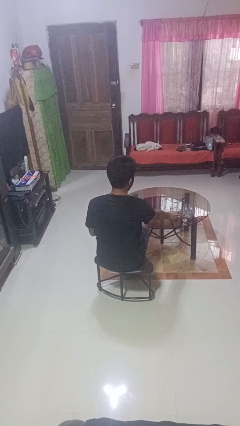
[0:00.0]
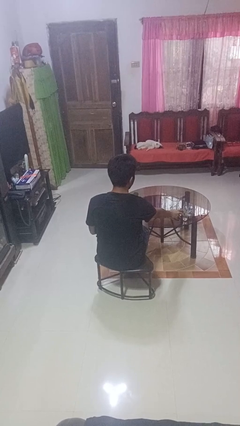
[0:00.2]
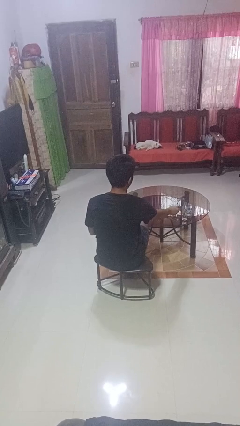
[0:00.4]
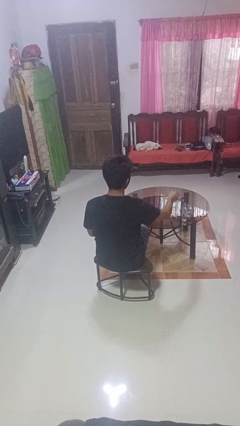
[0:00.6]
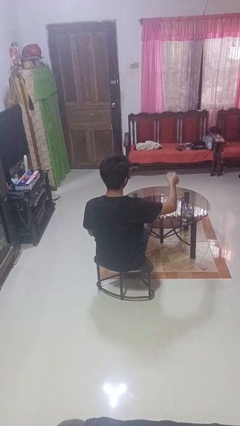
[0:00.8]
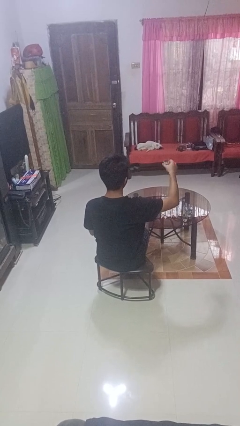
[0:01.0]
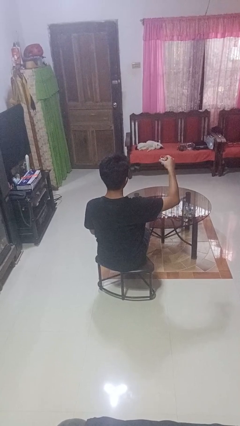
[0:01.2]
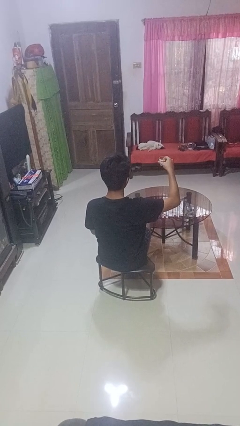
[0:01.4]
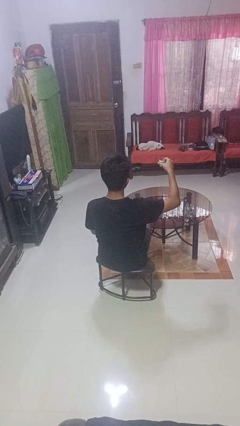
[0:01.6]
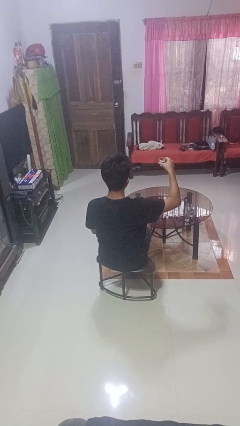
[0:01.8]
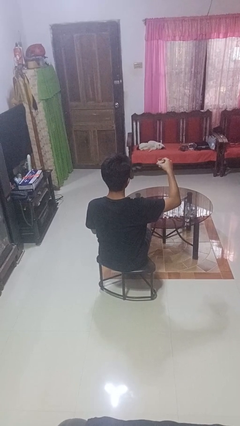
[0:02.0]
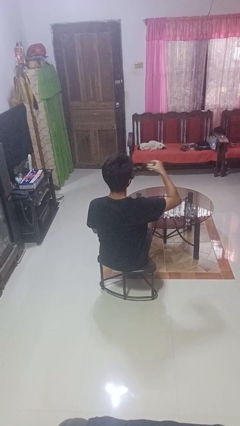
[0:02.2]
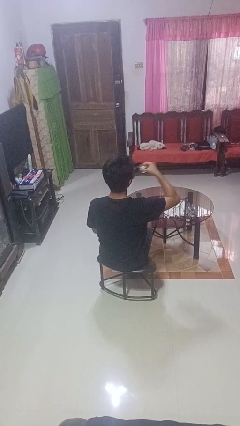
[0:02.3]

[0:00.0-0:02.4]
person picks up object from table

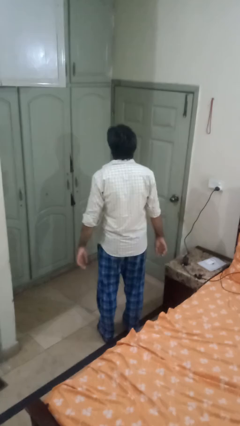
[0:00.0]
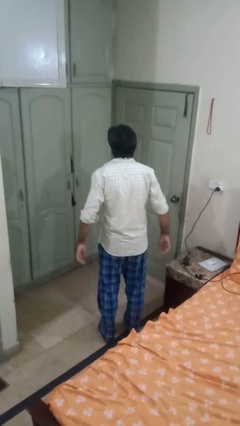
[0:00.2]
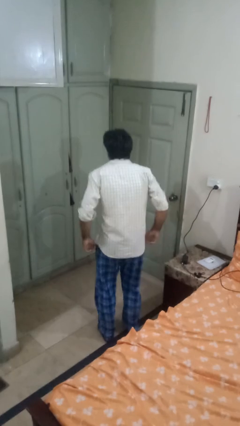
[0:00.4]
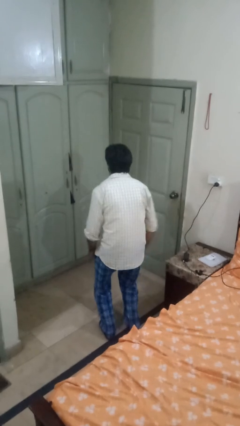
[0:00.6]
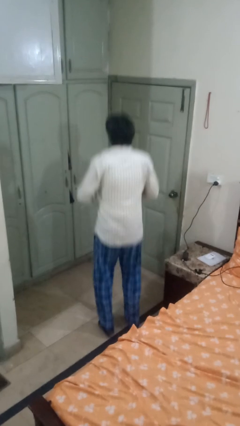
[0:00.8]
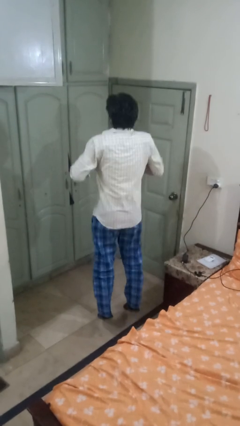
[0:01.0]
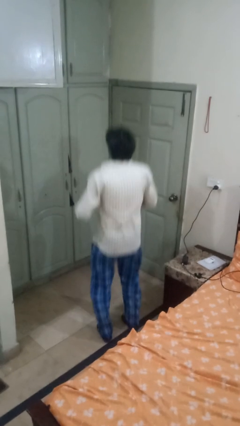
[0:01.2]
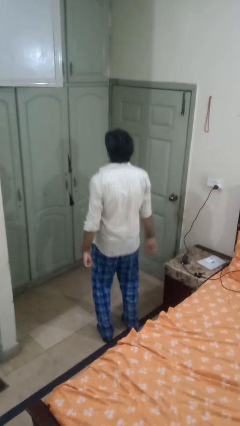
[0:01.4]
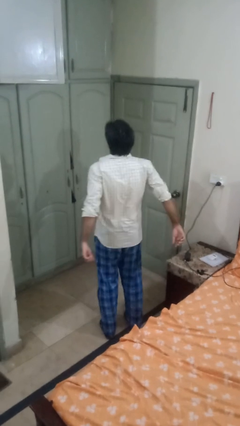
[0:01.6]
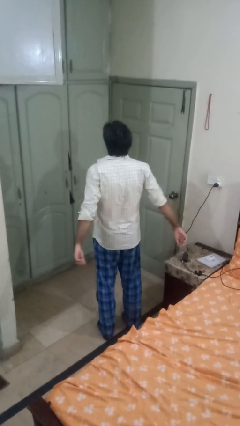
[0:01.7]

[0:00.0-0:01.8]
person jumps

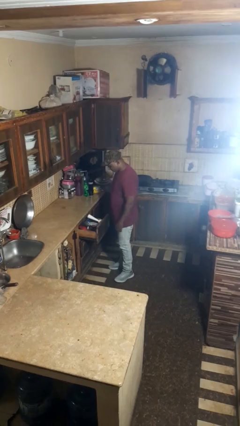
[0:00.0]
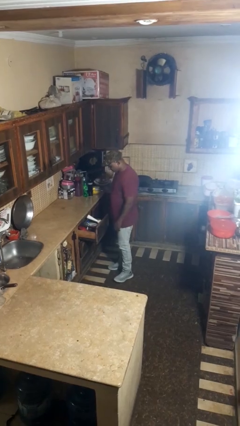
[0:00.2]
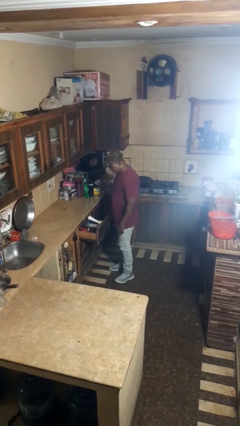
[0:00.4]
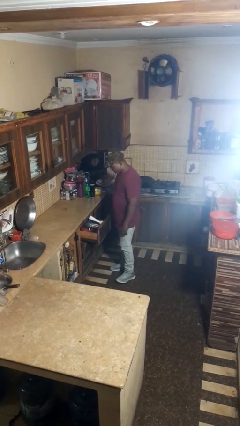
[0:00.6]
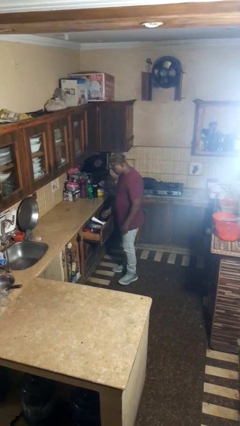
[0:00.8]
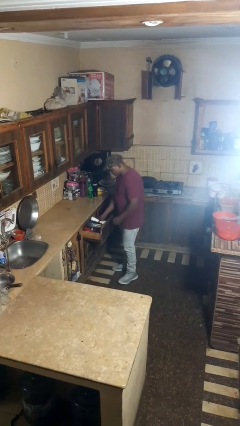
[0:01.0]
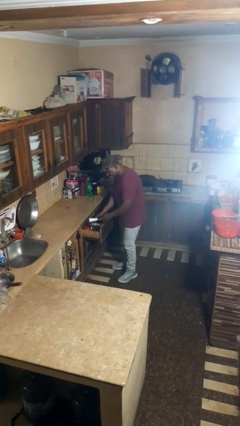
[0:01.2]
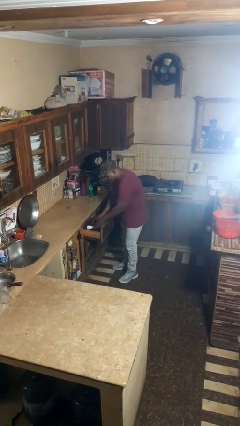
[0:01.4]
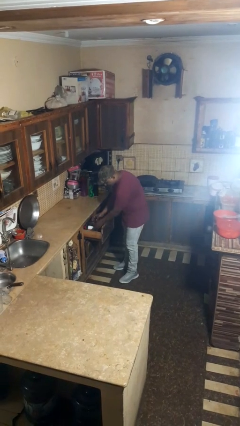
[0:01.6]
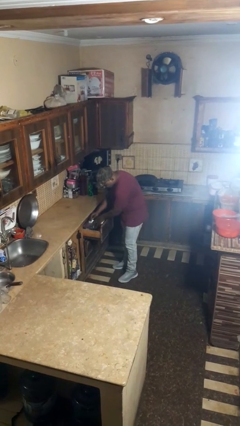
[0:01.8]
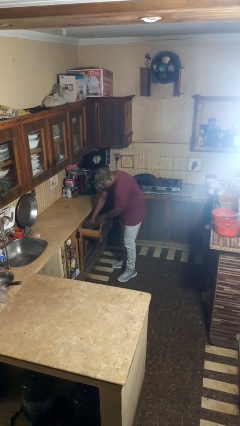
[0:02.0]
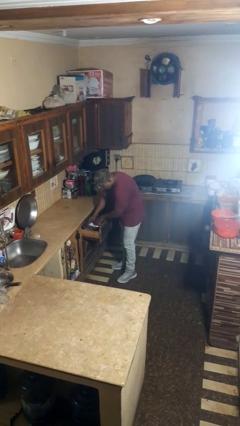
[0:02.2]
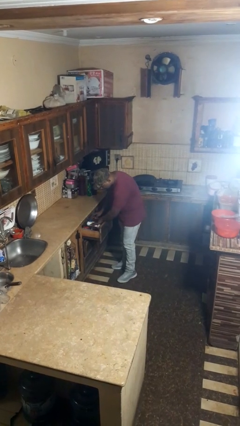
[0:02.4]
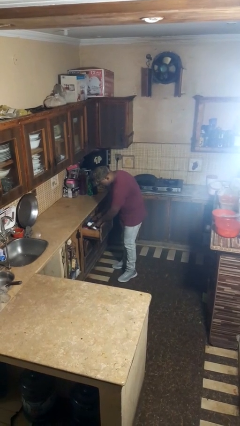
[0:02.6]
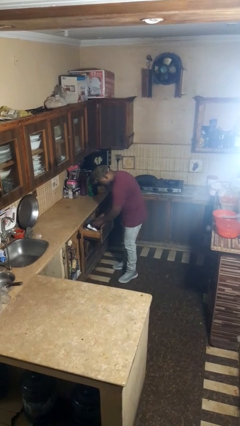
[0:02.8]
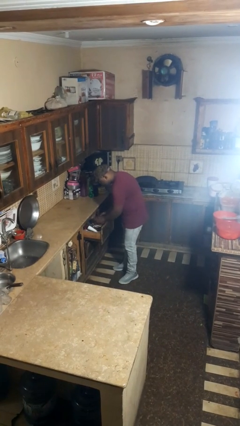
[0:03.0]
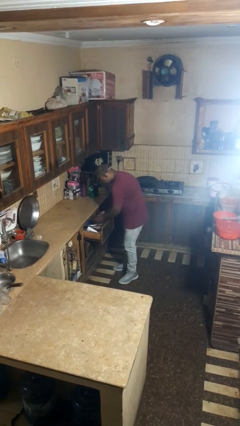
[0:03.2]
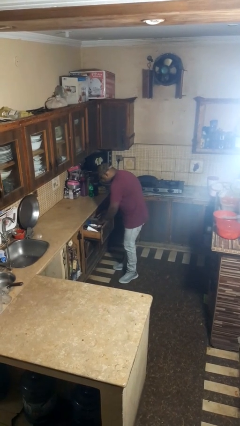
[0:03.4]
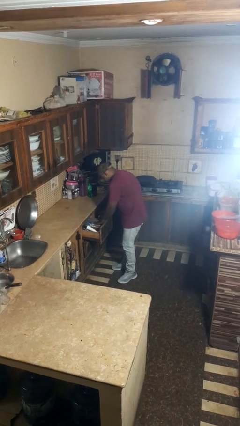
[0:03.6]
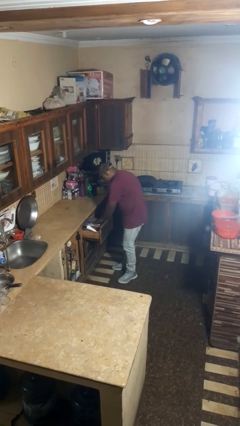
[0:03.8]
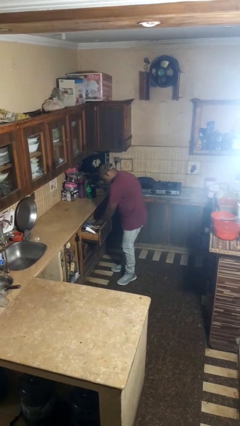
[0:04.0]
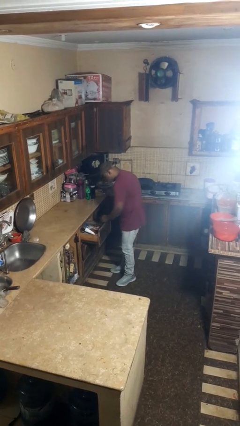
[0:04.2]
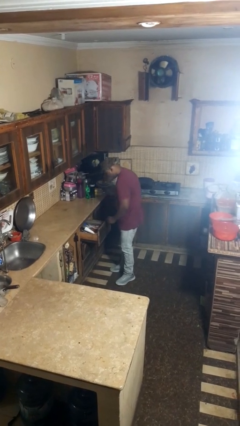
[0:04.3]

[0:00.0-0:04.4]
person searches in kitchen drawer

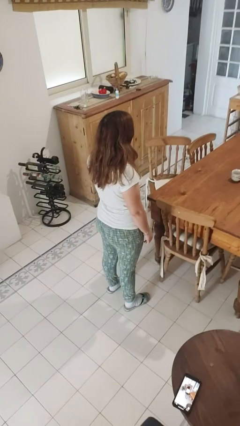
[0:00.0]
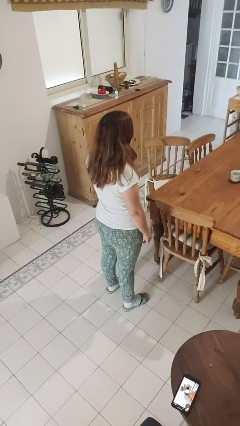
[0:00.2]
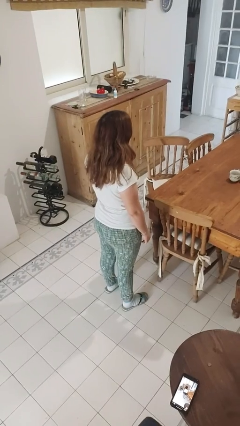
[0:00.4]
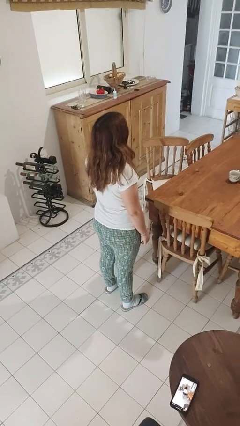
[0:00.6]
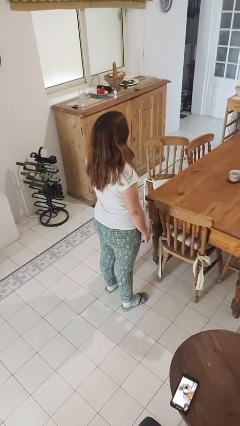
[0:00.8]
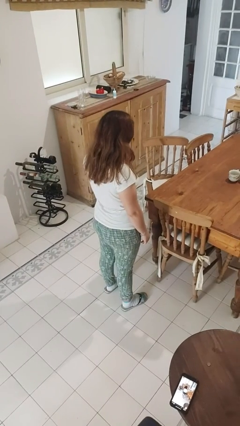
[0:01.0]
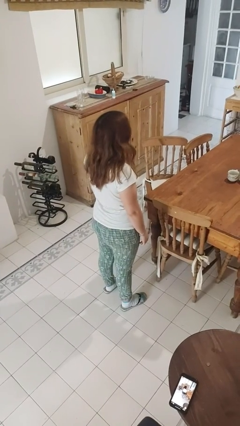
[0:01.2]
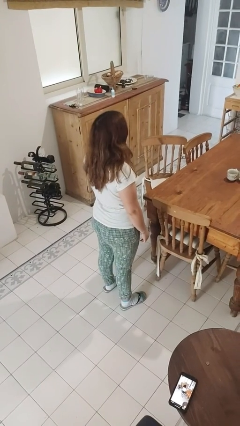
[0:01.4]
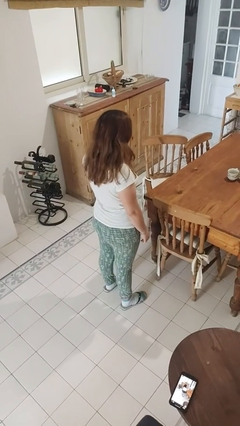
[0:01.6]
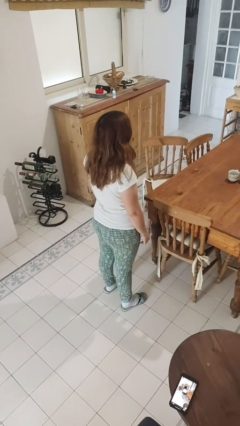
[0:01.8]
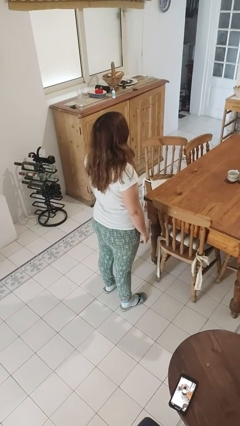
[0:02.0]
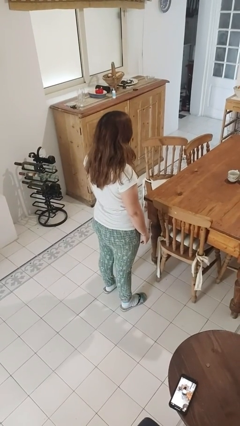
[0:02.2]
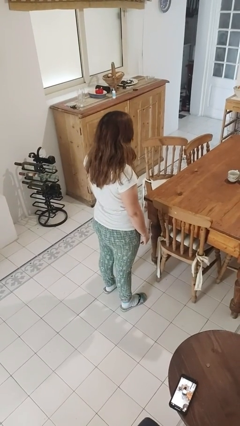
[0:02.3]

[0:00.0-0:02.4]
person nods head

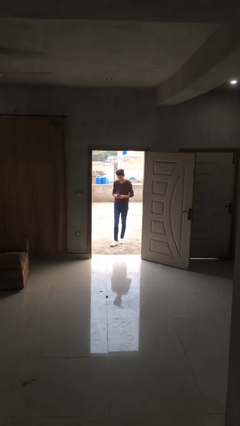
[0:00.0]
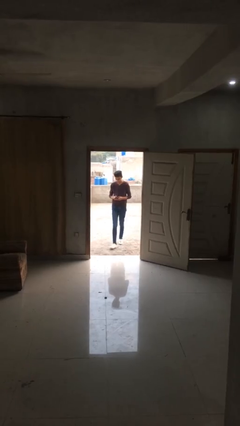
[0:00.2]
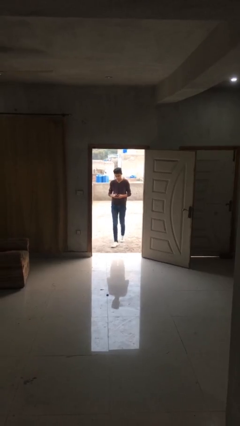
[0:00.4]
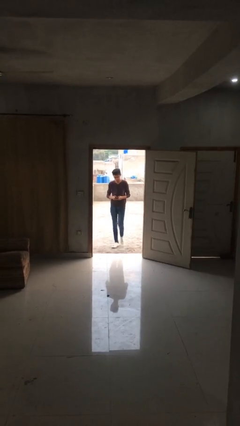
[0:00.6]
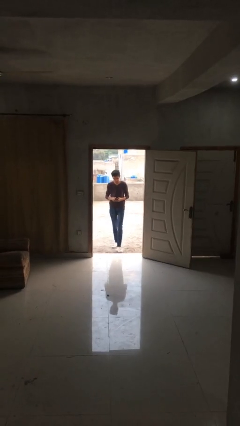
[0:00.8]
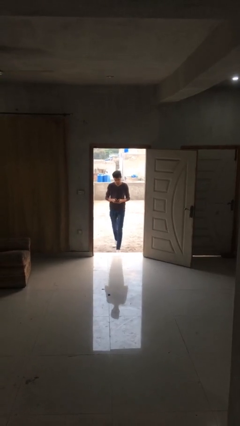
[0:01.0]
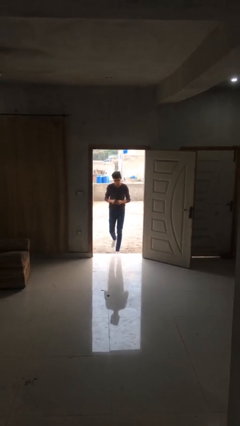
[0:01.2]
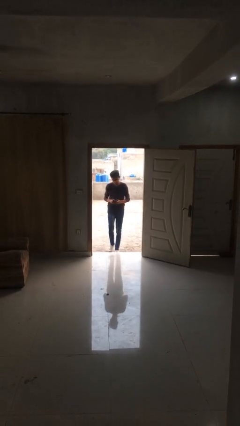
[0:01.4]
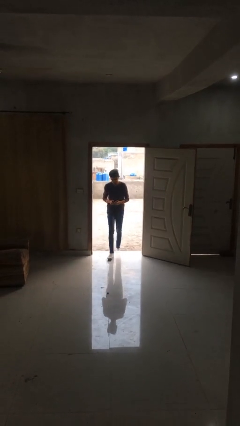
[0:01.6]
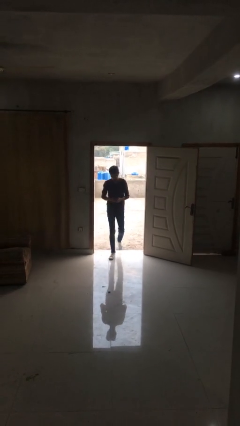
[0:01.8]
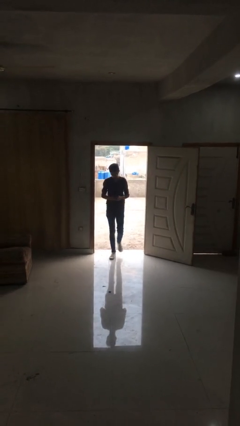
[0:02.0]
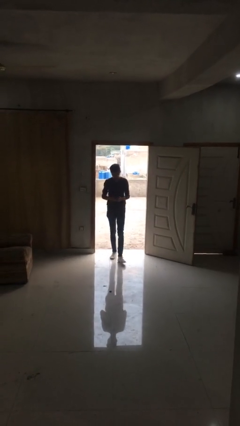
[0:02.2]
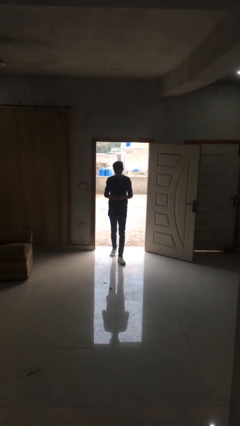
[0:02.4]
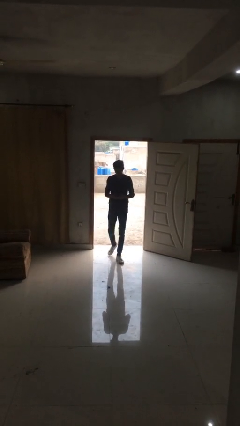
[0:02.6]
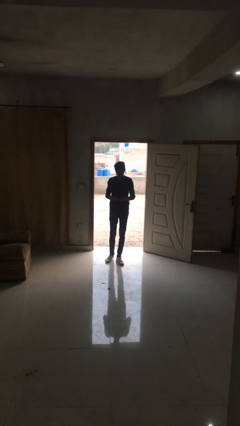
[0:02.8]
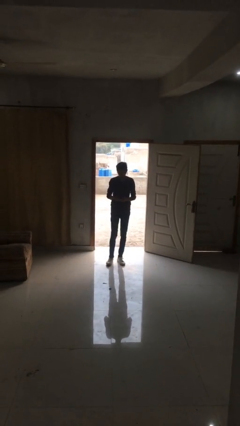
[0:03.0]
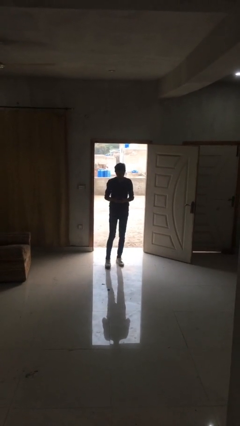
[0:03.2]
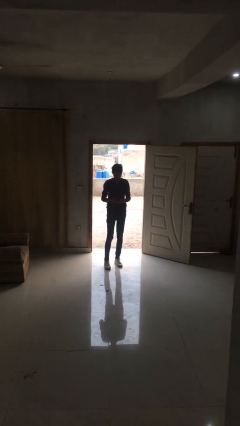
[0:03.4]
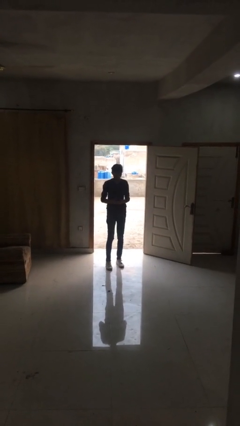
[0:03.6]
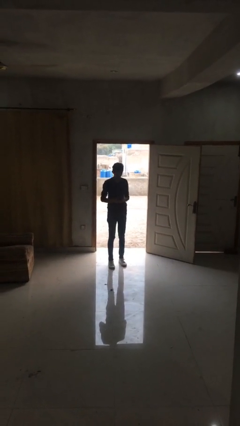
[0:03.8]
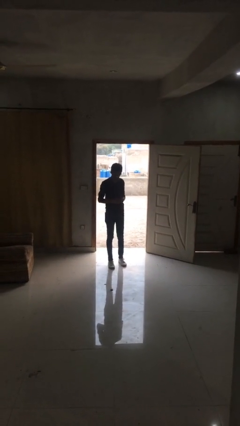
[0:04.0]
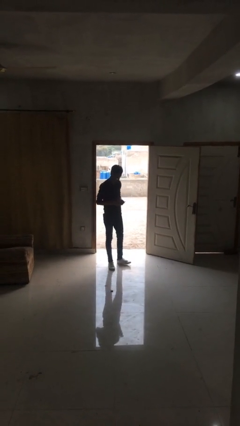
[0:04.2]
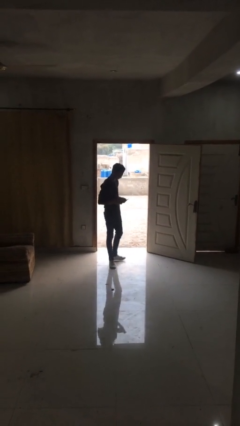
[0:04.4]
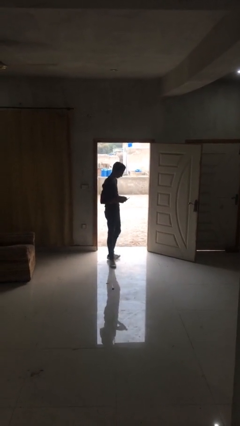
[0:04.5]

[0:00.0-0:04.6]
person enters scene through structure

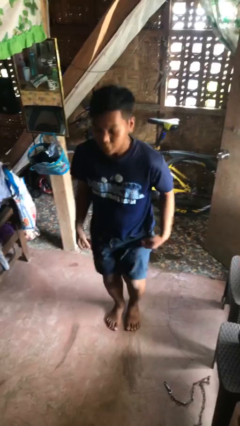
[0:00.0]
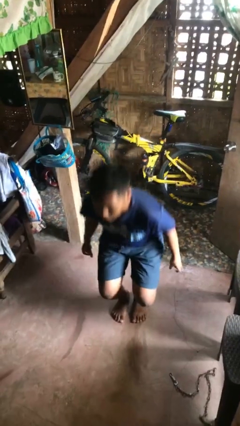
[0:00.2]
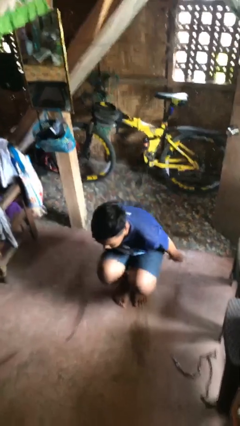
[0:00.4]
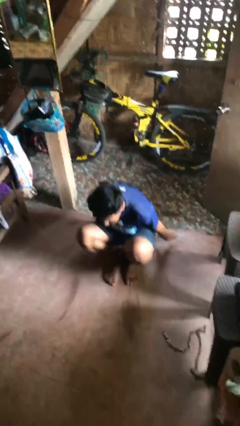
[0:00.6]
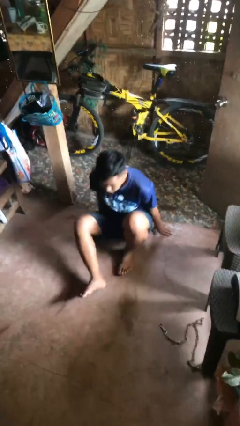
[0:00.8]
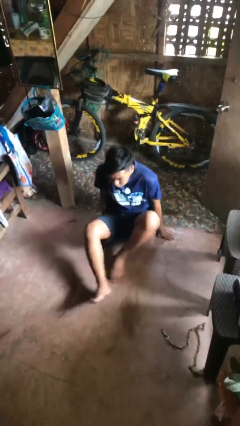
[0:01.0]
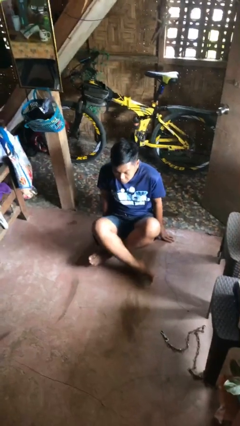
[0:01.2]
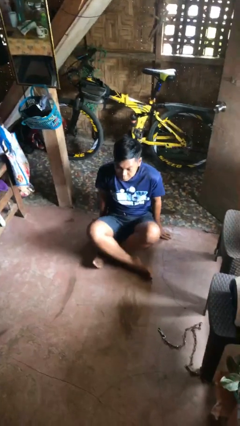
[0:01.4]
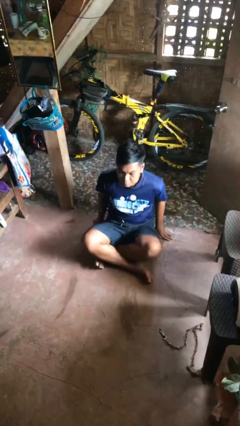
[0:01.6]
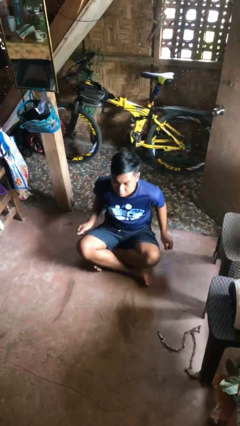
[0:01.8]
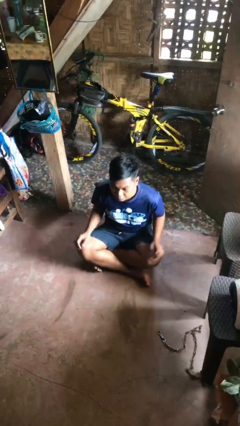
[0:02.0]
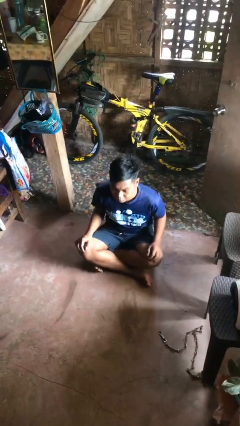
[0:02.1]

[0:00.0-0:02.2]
person sits crisscross
